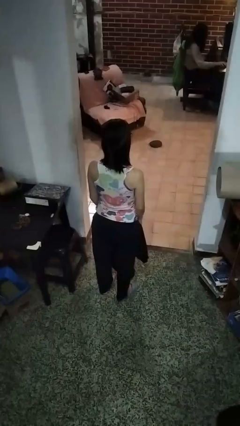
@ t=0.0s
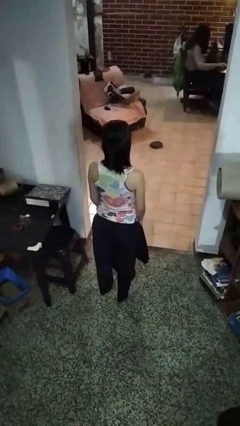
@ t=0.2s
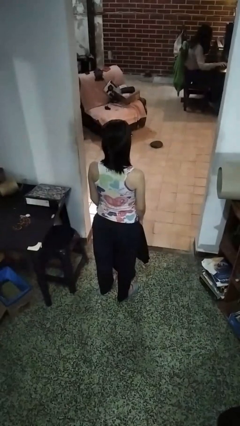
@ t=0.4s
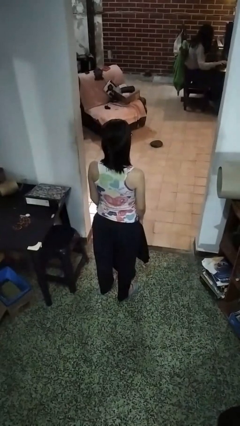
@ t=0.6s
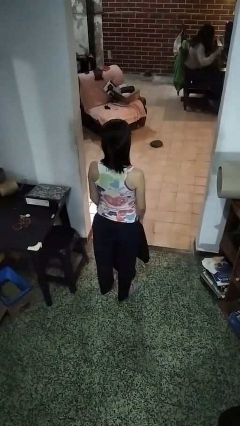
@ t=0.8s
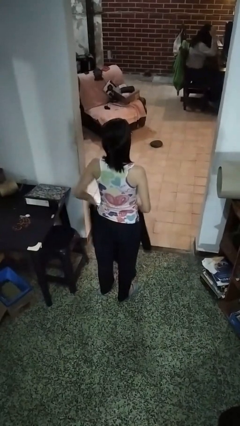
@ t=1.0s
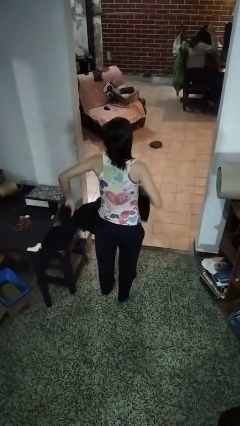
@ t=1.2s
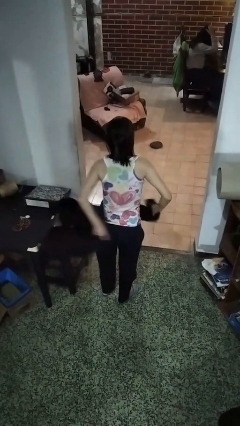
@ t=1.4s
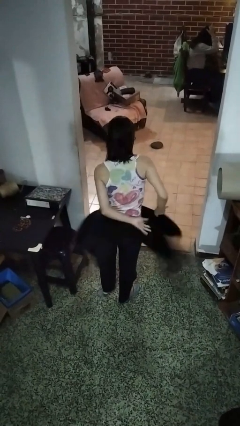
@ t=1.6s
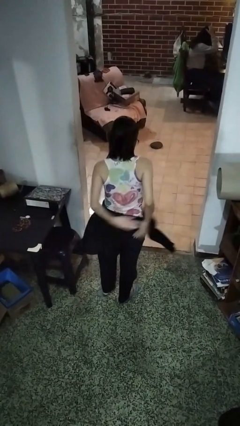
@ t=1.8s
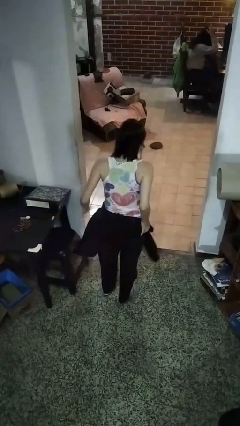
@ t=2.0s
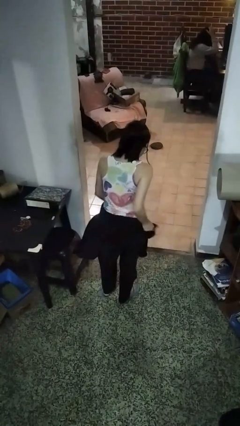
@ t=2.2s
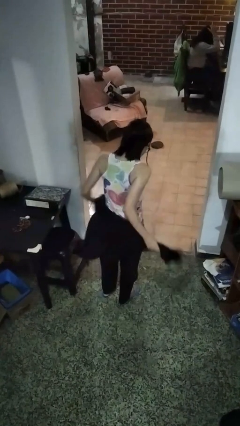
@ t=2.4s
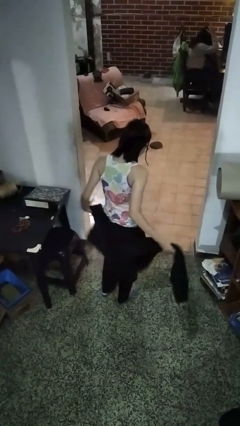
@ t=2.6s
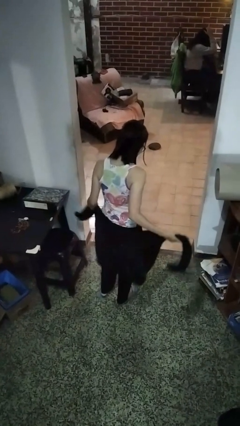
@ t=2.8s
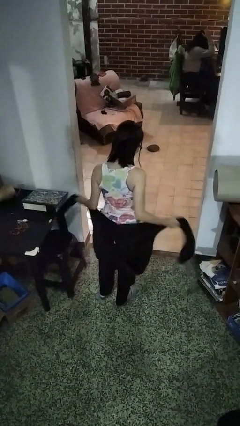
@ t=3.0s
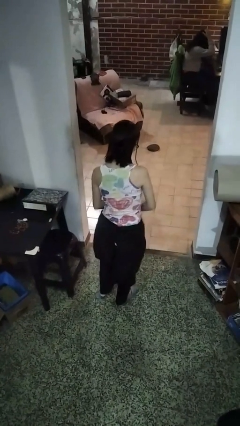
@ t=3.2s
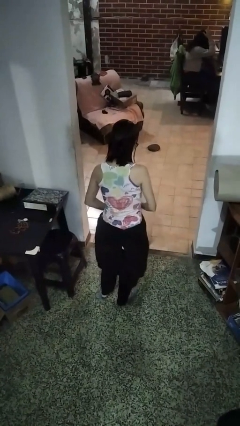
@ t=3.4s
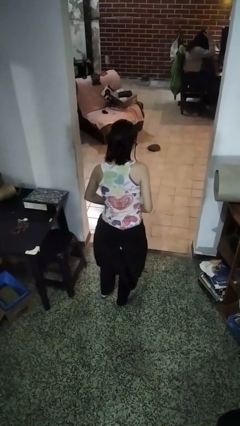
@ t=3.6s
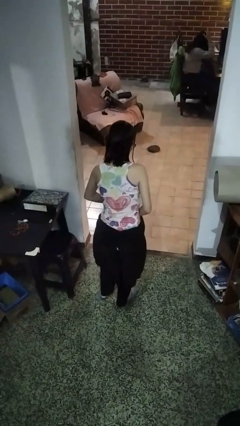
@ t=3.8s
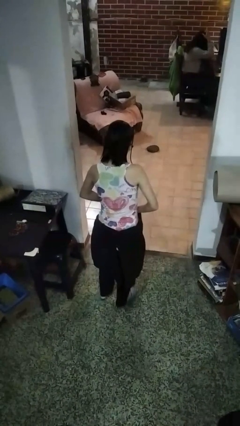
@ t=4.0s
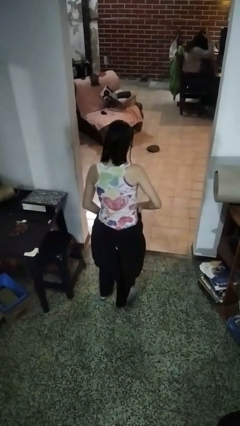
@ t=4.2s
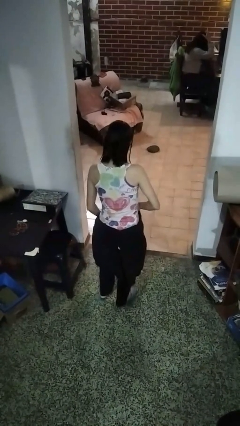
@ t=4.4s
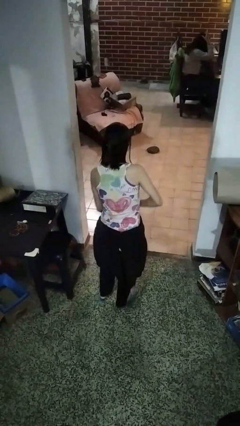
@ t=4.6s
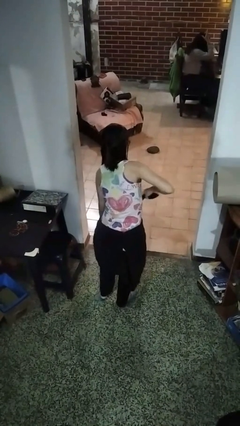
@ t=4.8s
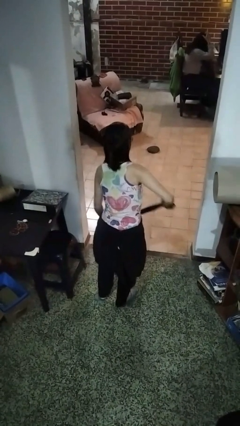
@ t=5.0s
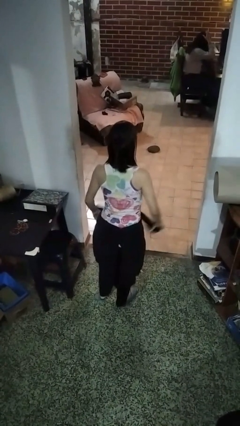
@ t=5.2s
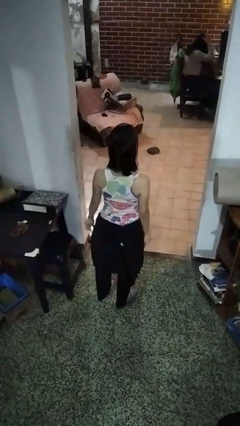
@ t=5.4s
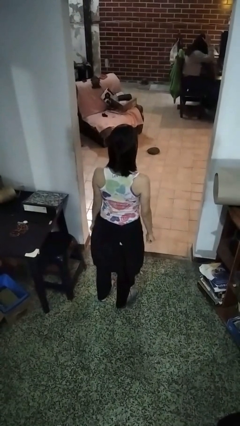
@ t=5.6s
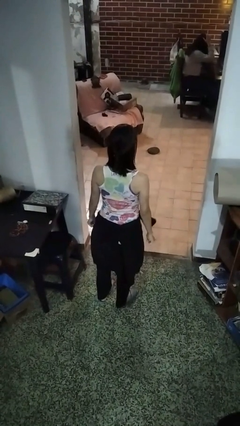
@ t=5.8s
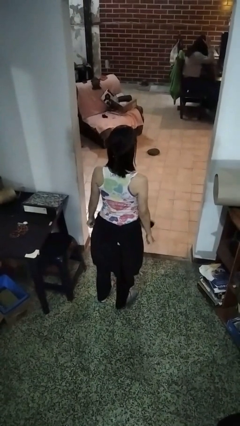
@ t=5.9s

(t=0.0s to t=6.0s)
person ties jacket around waist

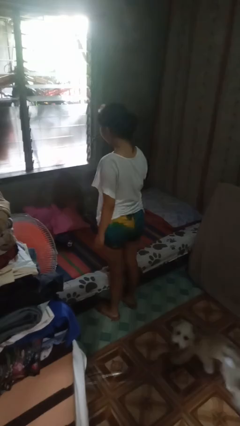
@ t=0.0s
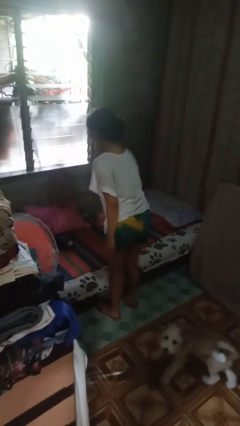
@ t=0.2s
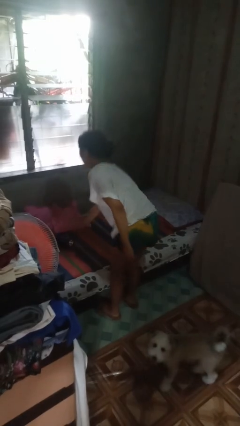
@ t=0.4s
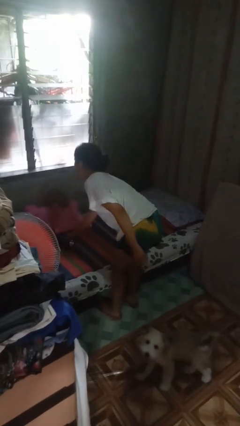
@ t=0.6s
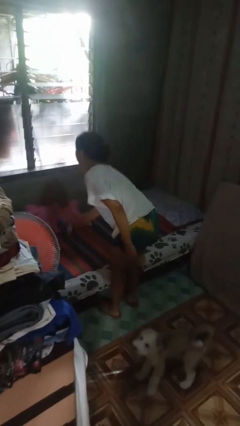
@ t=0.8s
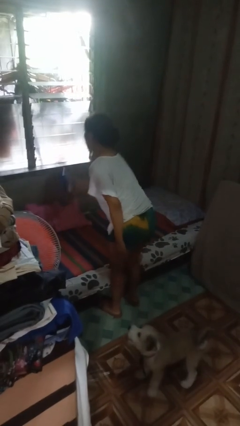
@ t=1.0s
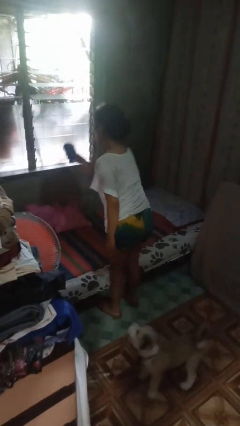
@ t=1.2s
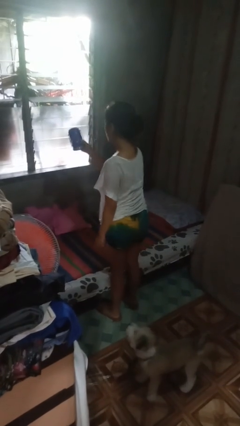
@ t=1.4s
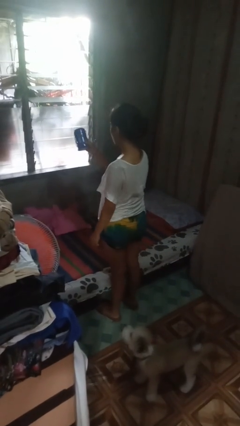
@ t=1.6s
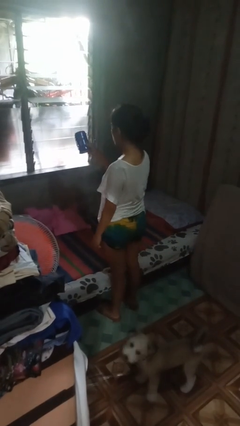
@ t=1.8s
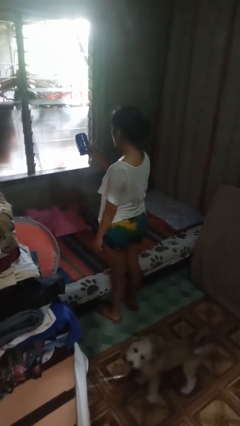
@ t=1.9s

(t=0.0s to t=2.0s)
person picks up object from bed

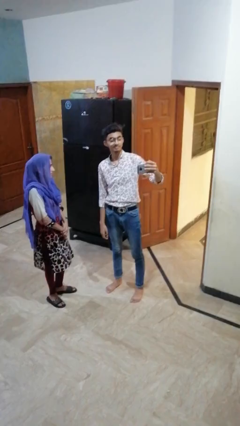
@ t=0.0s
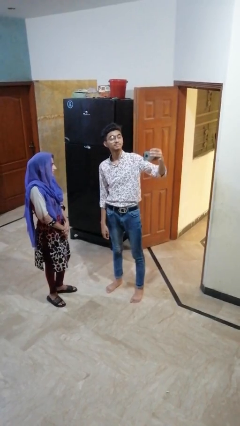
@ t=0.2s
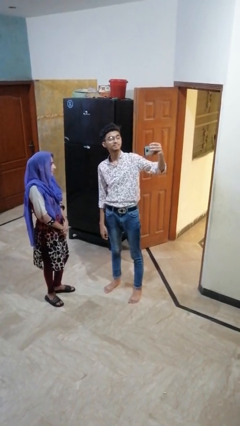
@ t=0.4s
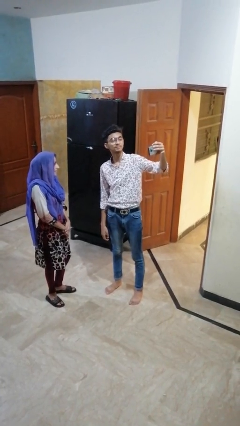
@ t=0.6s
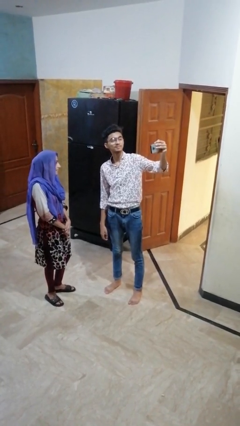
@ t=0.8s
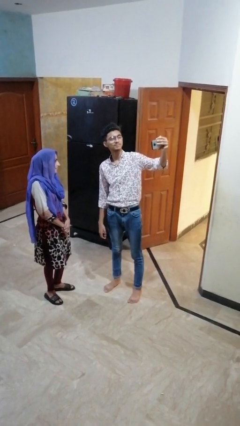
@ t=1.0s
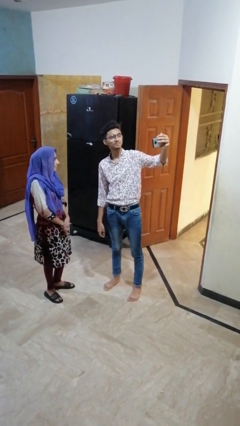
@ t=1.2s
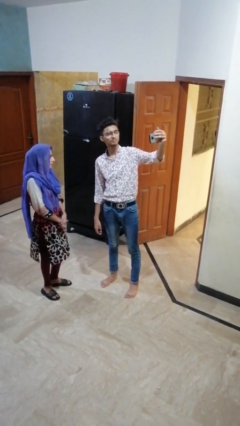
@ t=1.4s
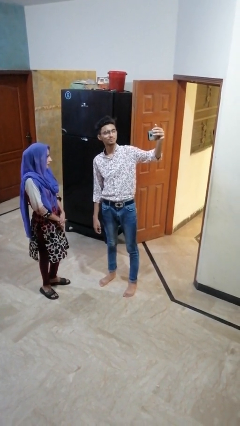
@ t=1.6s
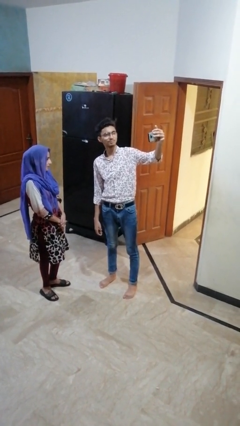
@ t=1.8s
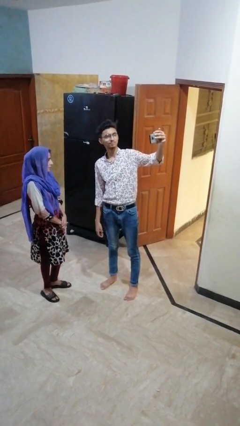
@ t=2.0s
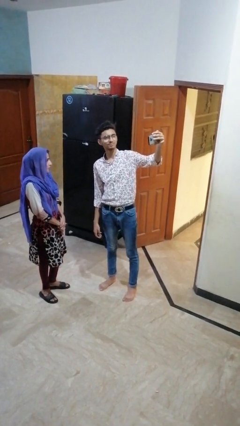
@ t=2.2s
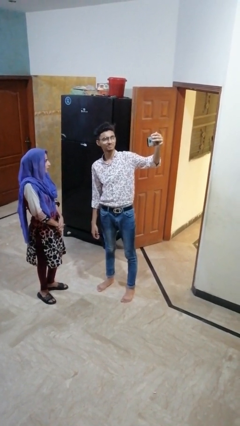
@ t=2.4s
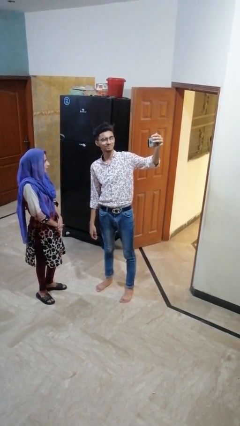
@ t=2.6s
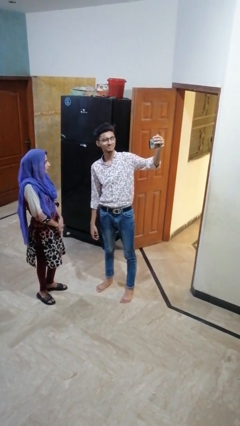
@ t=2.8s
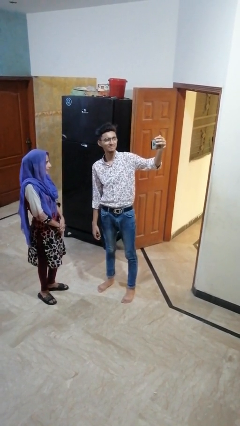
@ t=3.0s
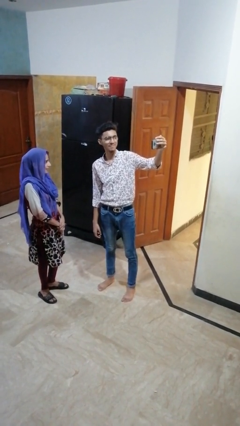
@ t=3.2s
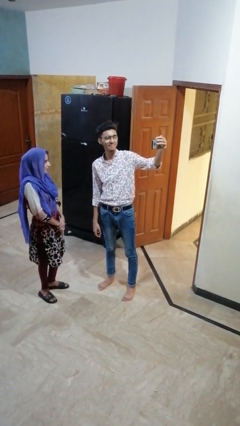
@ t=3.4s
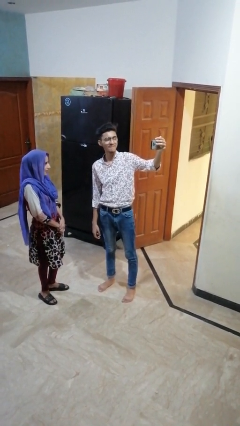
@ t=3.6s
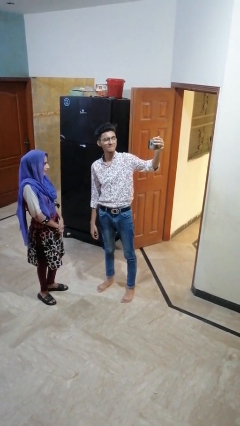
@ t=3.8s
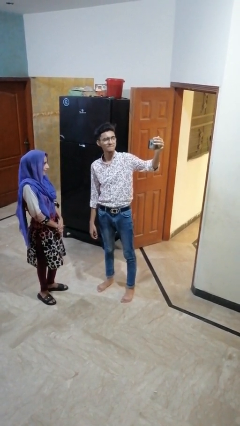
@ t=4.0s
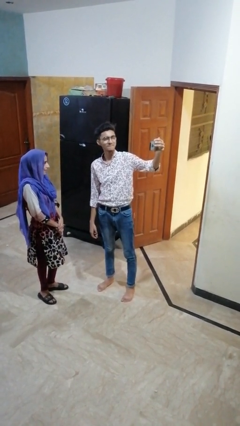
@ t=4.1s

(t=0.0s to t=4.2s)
person takes selfie with person

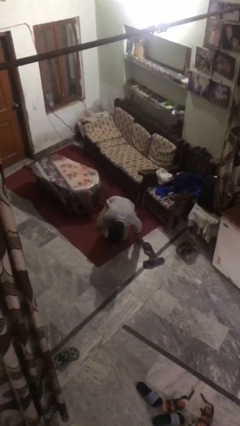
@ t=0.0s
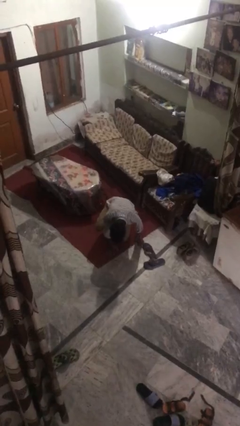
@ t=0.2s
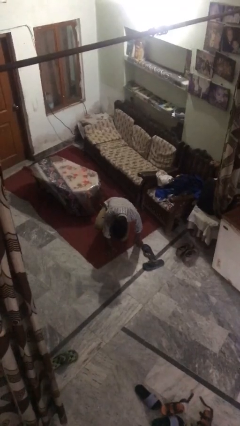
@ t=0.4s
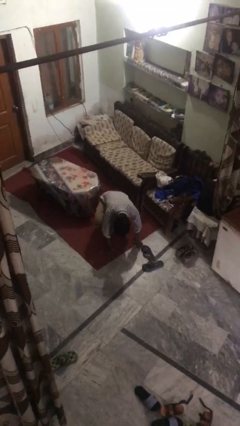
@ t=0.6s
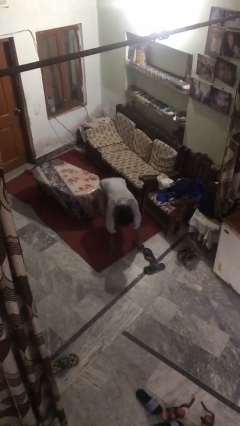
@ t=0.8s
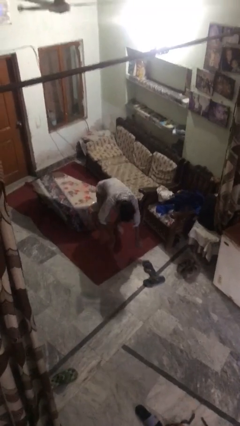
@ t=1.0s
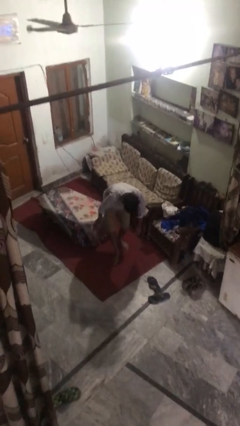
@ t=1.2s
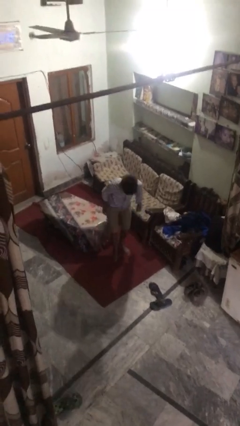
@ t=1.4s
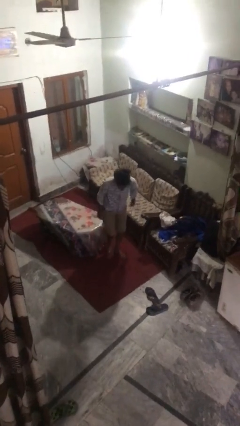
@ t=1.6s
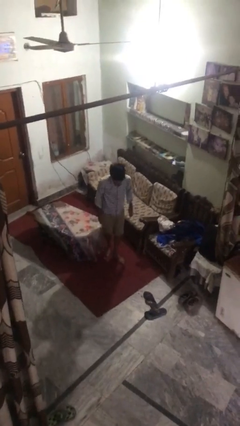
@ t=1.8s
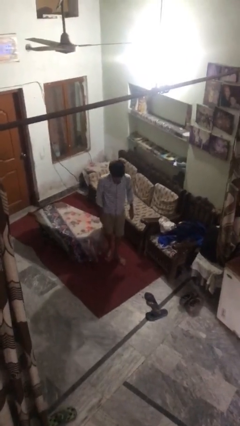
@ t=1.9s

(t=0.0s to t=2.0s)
person stands up from floor

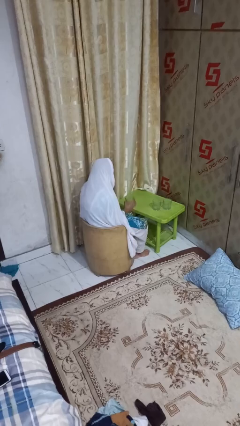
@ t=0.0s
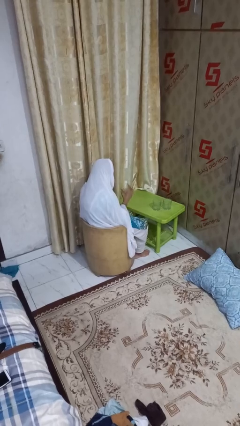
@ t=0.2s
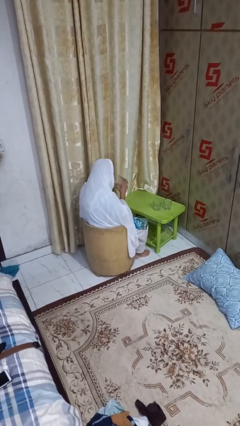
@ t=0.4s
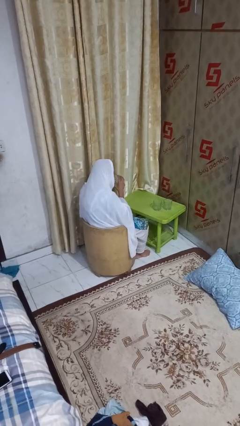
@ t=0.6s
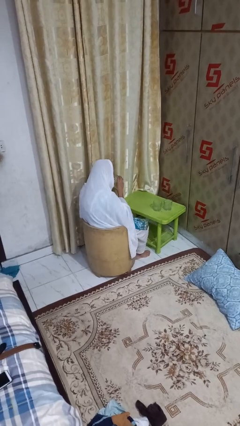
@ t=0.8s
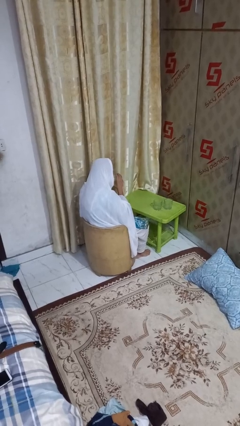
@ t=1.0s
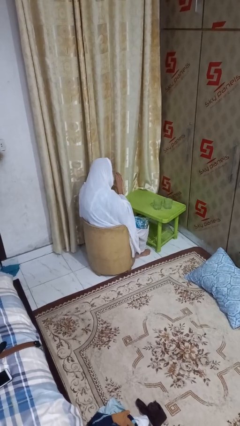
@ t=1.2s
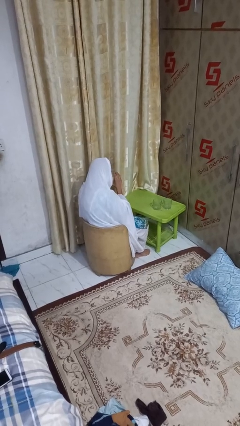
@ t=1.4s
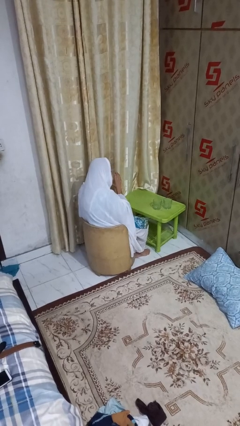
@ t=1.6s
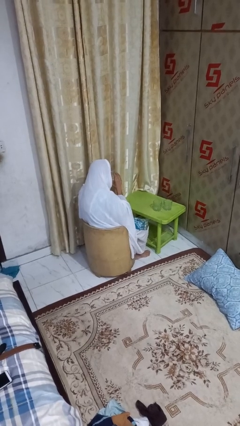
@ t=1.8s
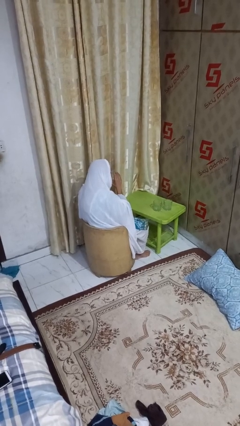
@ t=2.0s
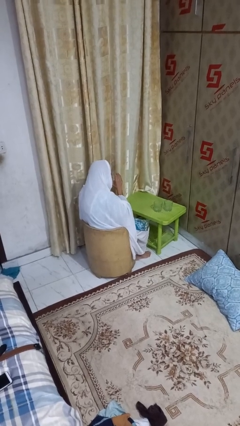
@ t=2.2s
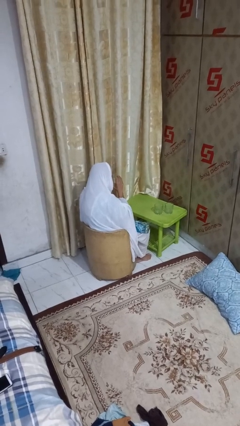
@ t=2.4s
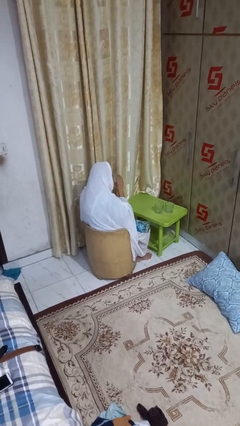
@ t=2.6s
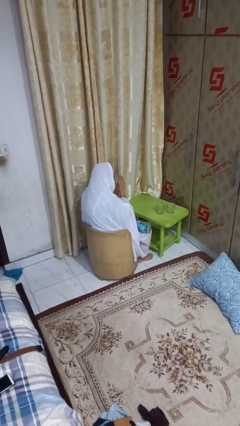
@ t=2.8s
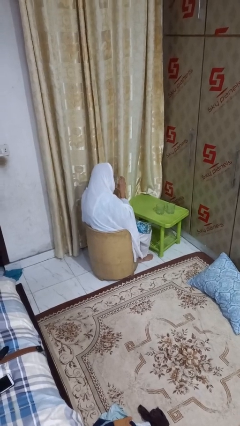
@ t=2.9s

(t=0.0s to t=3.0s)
person drinks from shotglass
